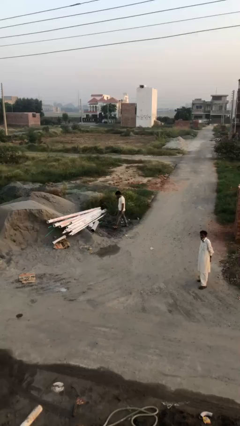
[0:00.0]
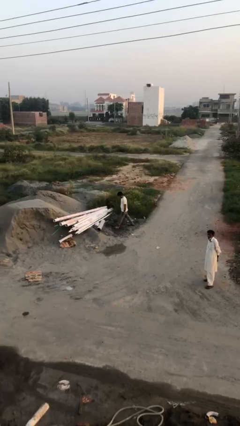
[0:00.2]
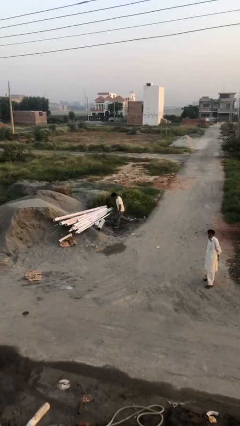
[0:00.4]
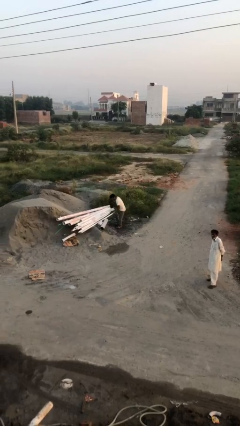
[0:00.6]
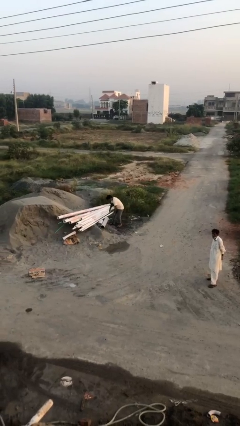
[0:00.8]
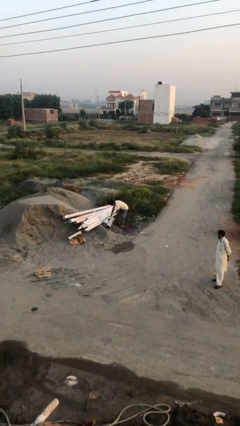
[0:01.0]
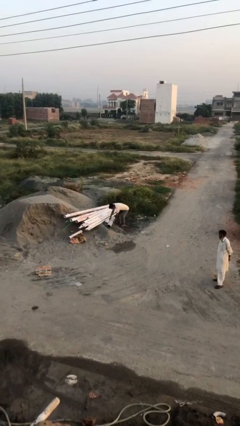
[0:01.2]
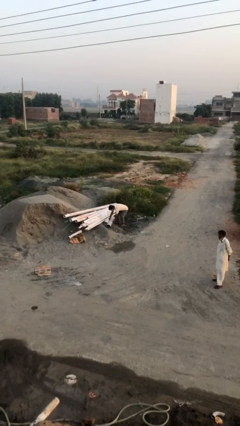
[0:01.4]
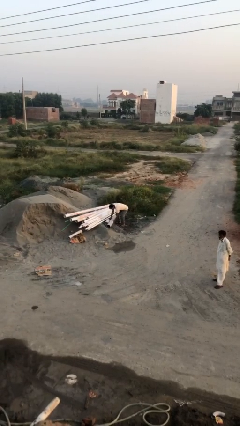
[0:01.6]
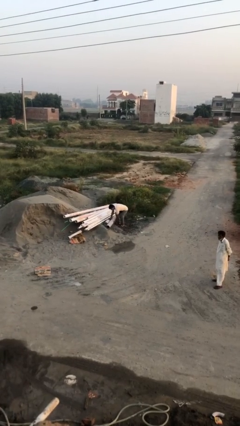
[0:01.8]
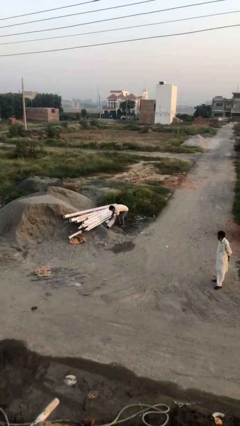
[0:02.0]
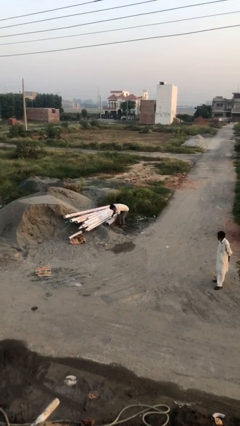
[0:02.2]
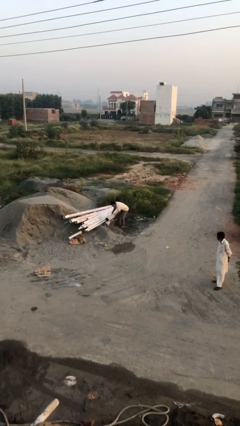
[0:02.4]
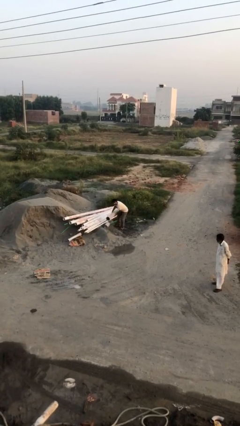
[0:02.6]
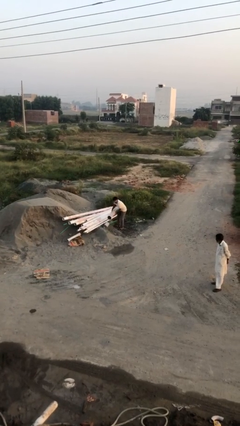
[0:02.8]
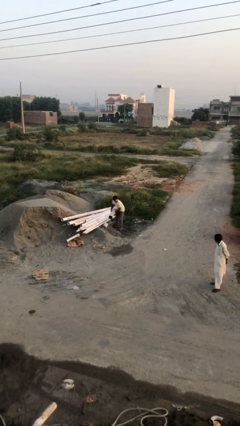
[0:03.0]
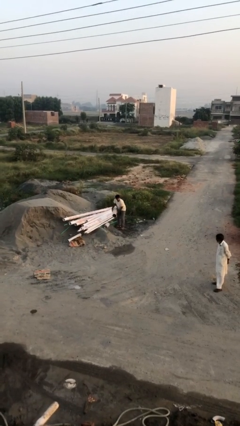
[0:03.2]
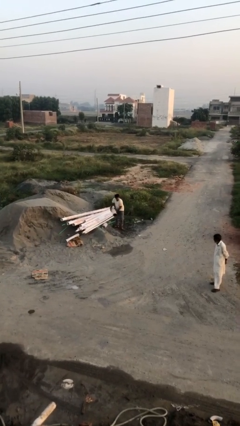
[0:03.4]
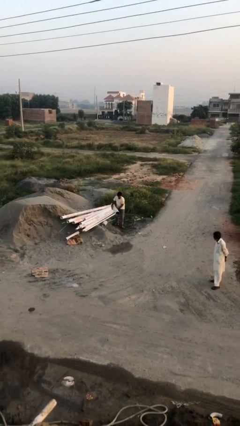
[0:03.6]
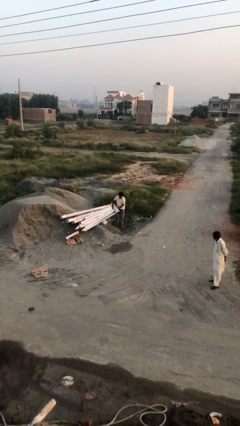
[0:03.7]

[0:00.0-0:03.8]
person picks up object from floor

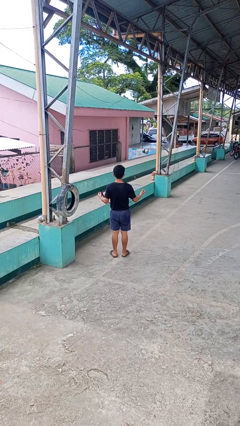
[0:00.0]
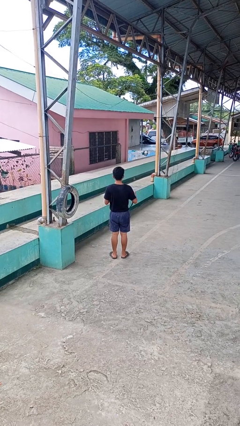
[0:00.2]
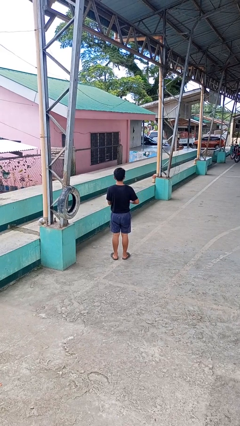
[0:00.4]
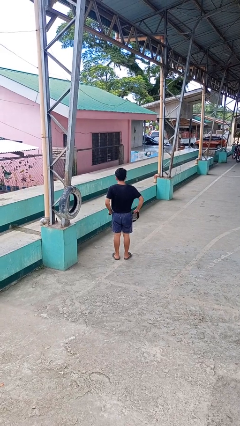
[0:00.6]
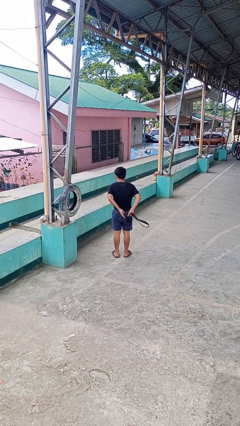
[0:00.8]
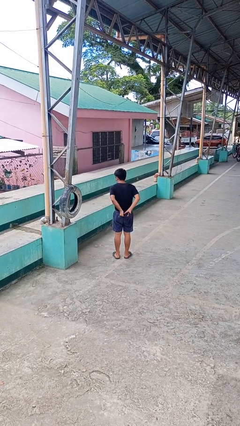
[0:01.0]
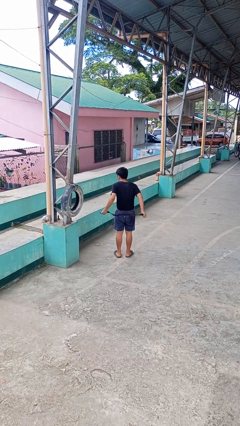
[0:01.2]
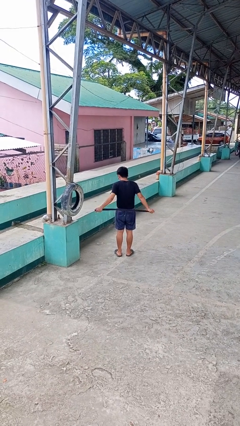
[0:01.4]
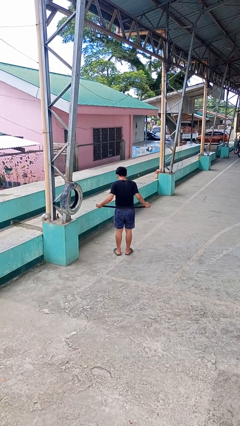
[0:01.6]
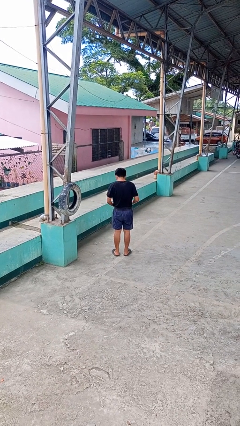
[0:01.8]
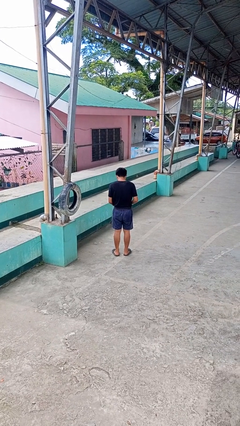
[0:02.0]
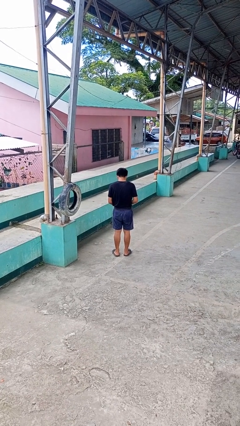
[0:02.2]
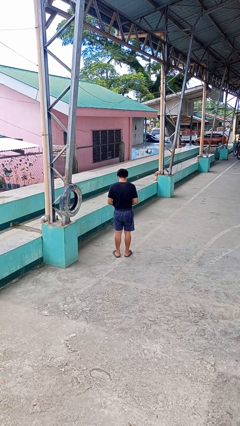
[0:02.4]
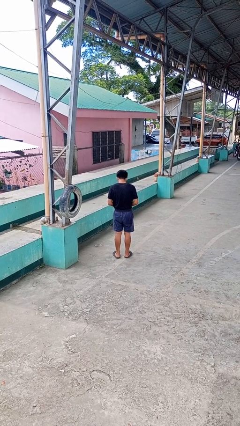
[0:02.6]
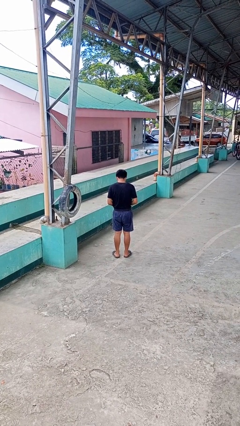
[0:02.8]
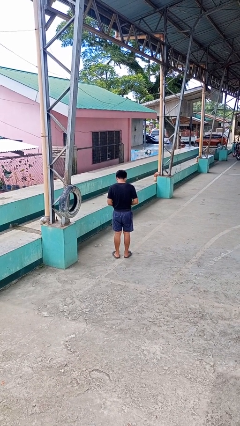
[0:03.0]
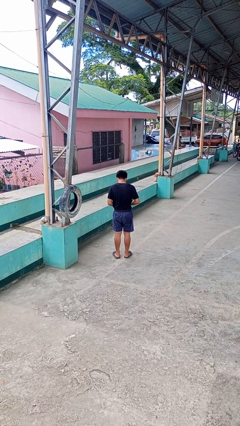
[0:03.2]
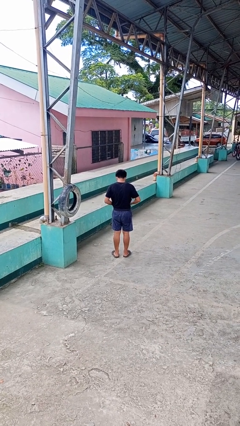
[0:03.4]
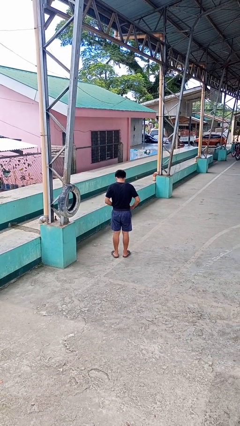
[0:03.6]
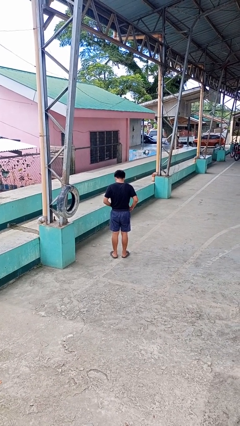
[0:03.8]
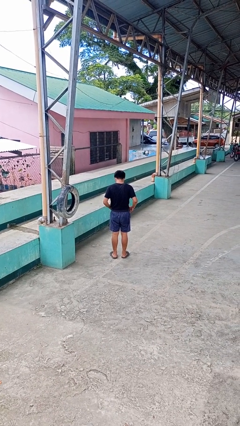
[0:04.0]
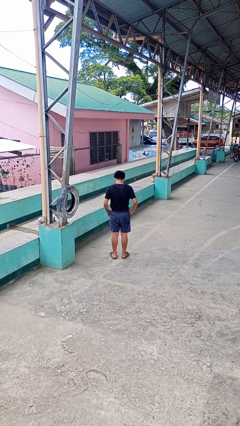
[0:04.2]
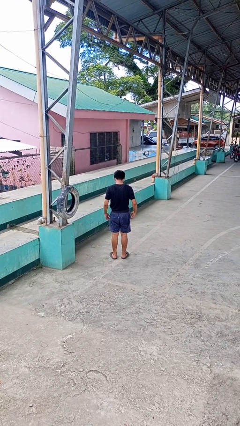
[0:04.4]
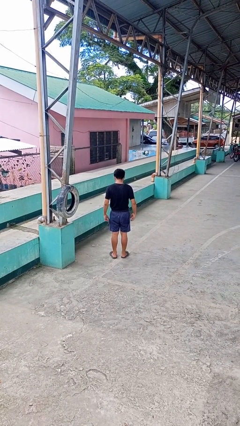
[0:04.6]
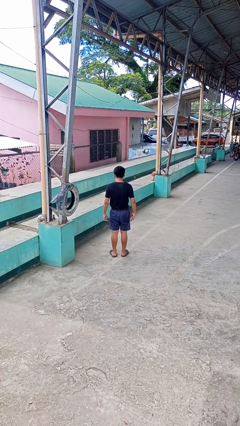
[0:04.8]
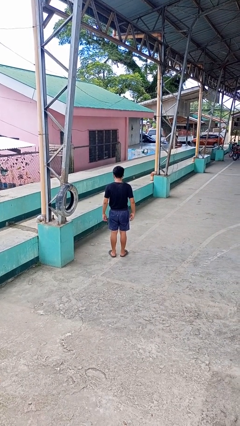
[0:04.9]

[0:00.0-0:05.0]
person puts on belt

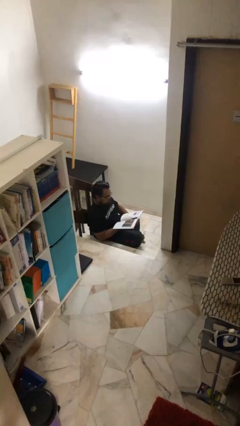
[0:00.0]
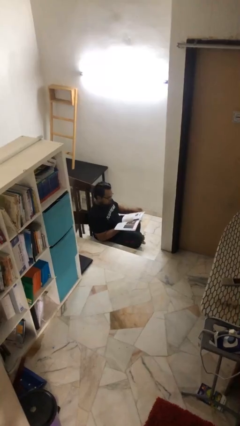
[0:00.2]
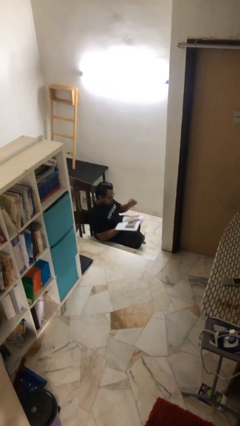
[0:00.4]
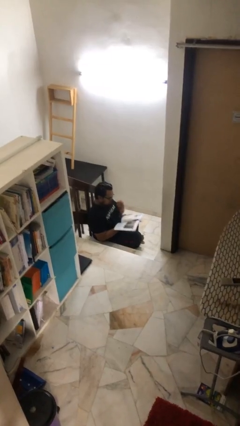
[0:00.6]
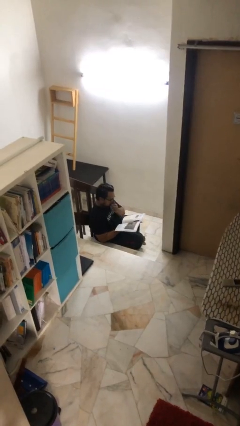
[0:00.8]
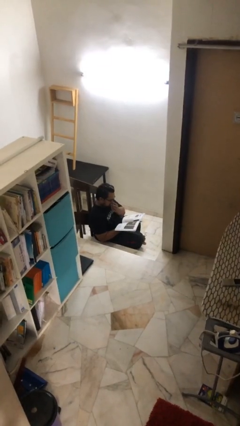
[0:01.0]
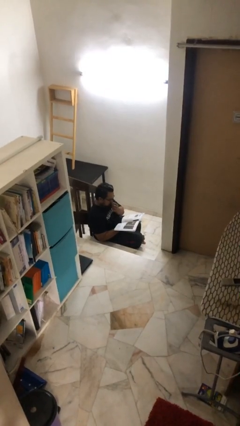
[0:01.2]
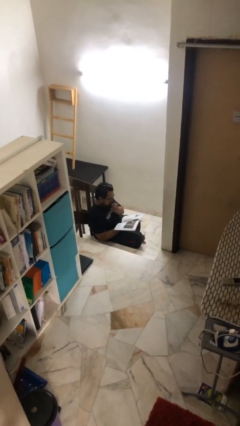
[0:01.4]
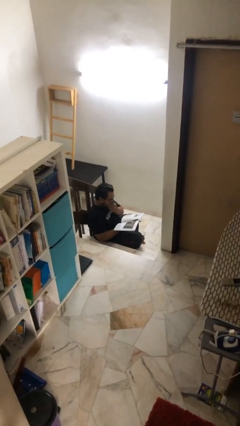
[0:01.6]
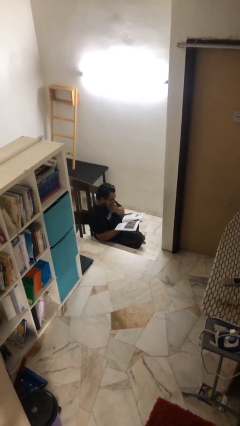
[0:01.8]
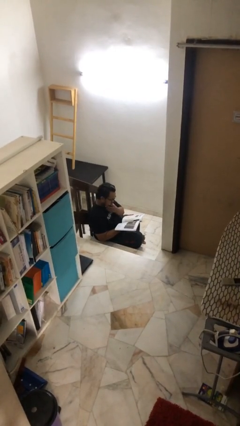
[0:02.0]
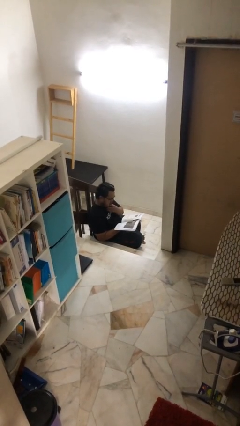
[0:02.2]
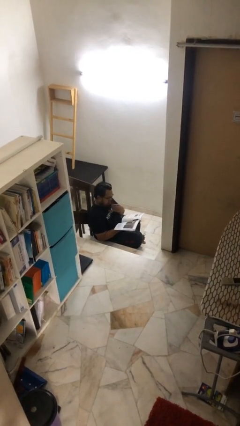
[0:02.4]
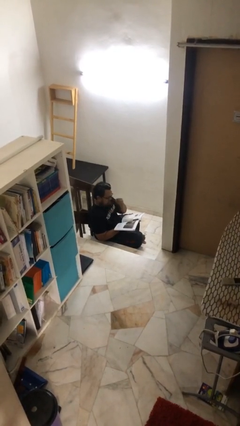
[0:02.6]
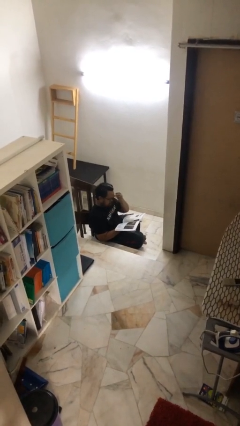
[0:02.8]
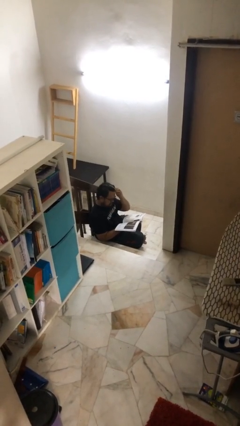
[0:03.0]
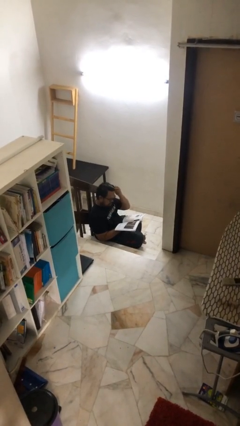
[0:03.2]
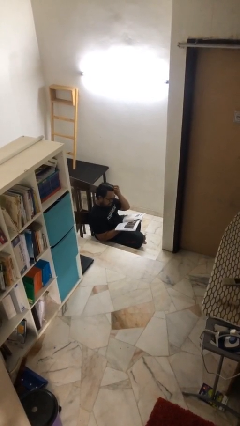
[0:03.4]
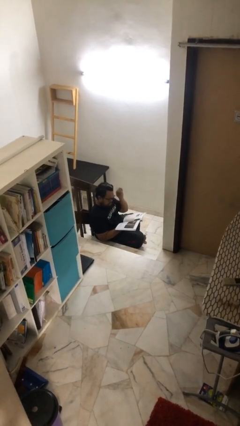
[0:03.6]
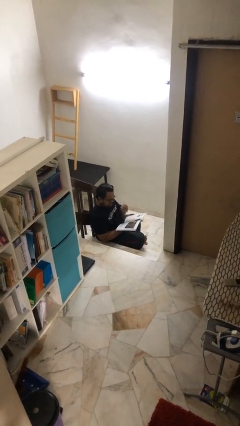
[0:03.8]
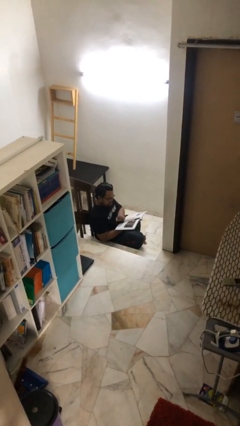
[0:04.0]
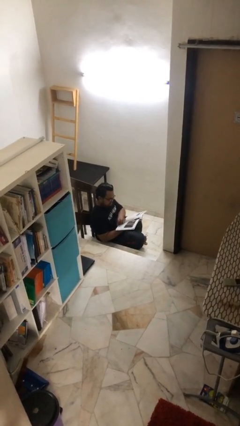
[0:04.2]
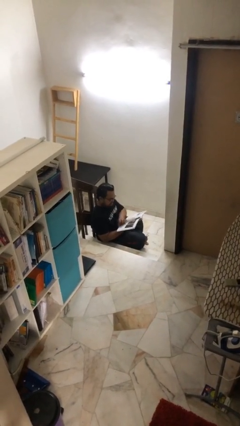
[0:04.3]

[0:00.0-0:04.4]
person reads document

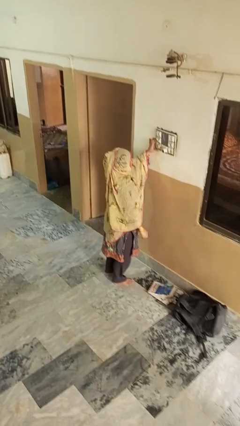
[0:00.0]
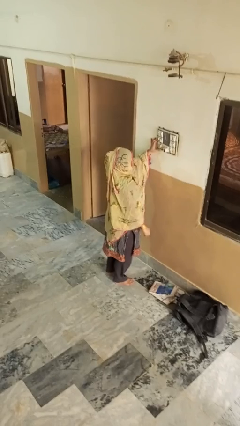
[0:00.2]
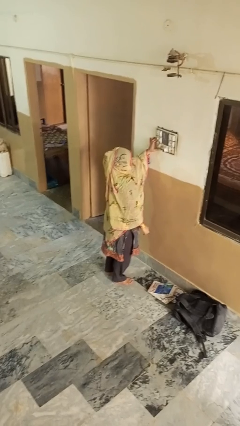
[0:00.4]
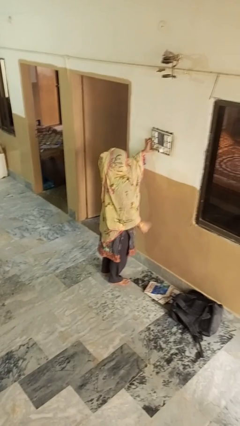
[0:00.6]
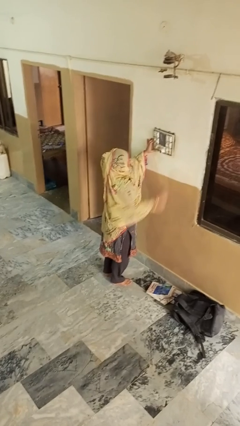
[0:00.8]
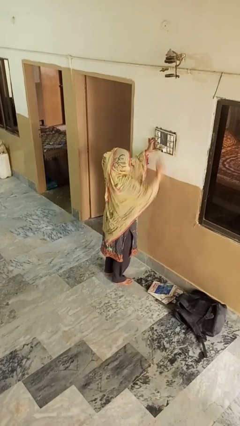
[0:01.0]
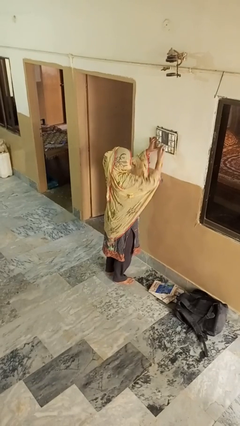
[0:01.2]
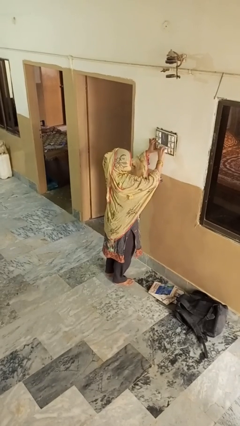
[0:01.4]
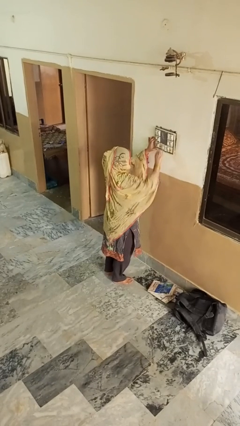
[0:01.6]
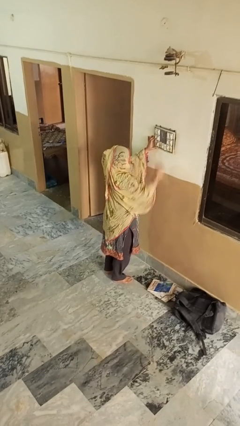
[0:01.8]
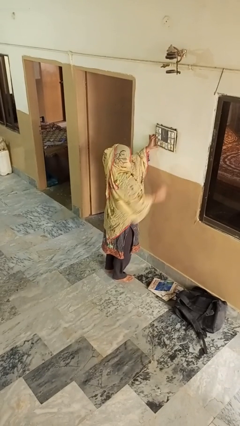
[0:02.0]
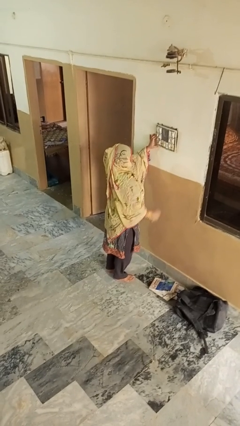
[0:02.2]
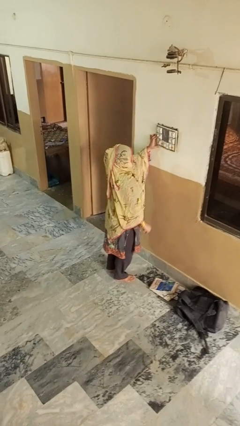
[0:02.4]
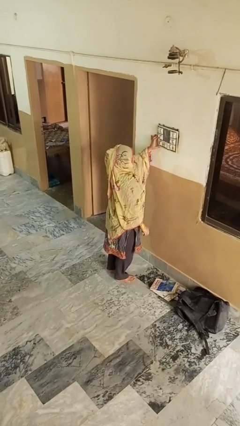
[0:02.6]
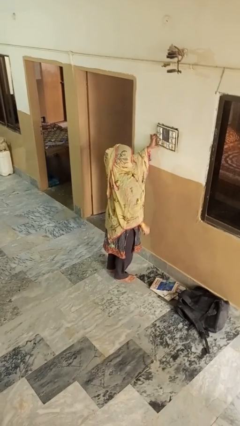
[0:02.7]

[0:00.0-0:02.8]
person unplugs from electrical socket

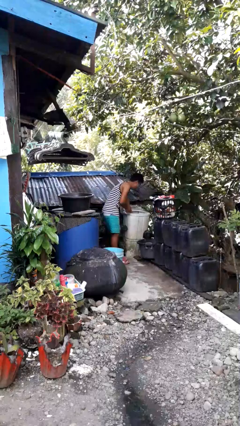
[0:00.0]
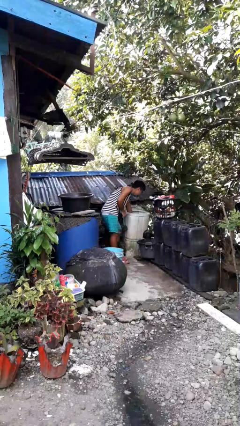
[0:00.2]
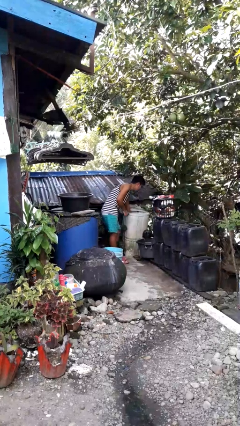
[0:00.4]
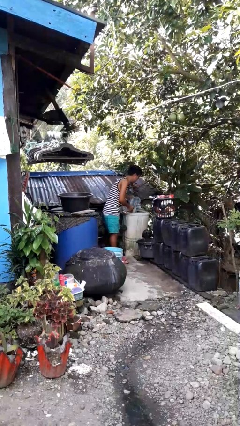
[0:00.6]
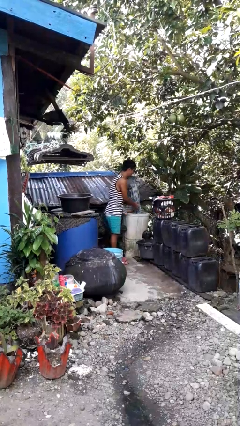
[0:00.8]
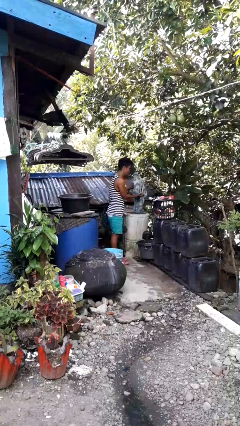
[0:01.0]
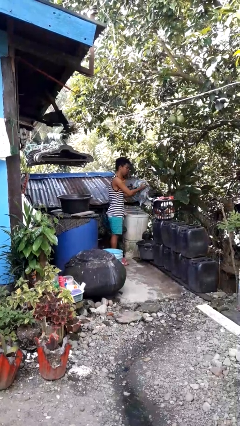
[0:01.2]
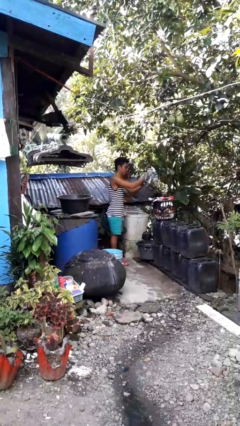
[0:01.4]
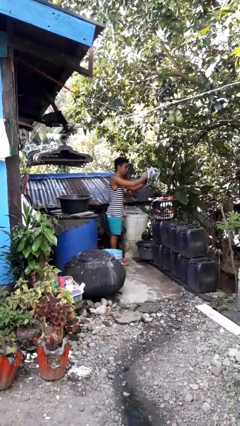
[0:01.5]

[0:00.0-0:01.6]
person unloads dryer

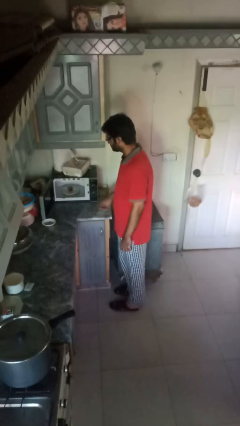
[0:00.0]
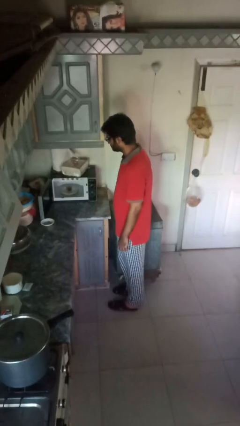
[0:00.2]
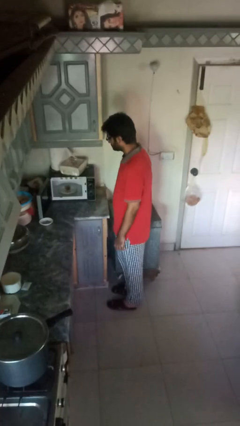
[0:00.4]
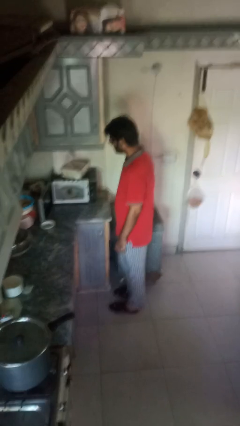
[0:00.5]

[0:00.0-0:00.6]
person takes object from oven
